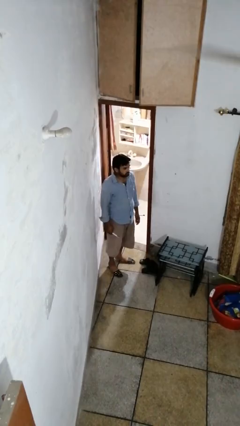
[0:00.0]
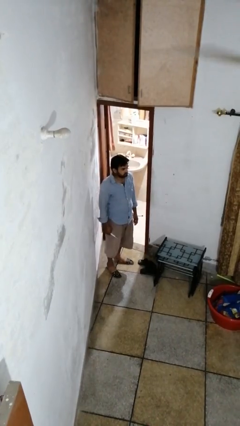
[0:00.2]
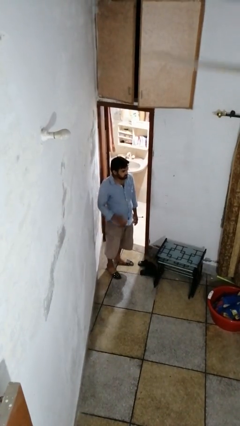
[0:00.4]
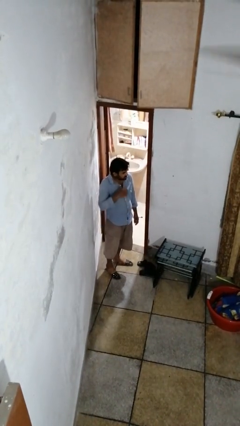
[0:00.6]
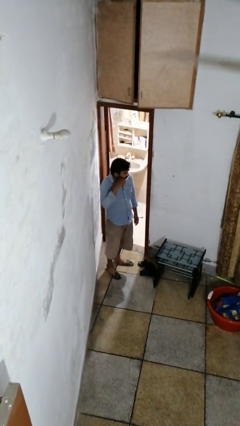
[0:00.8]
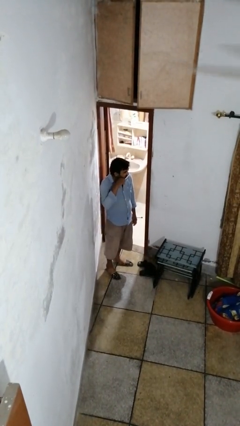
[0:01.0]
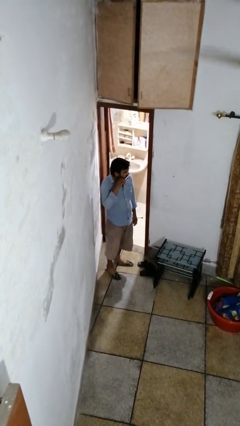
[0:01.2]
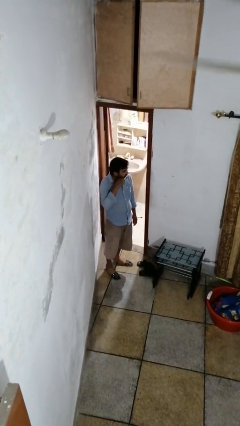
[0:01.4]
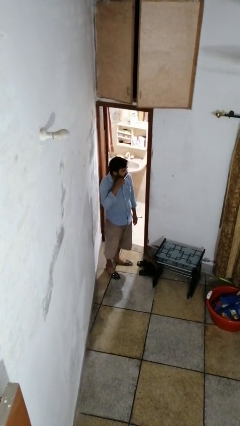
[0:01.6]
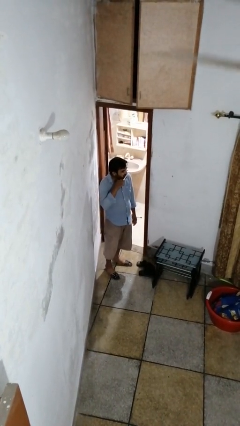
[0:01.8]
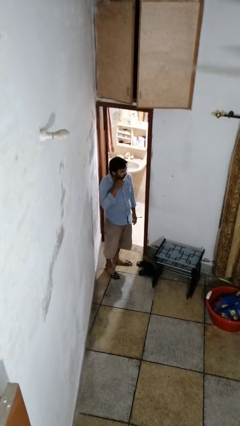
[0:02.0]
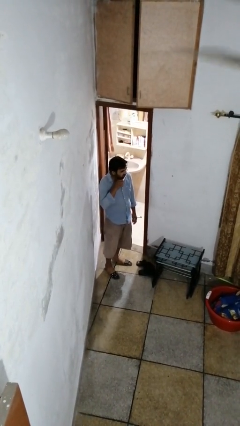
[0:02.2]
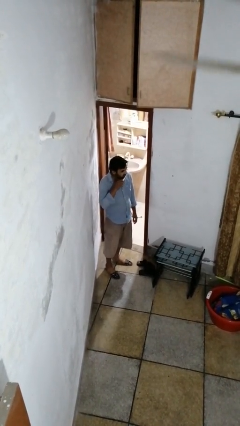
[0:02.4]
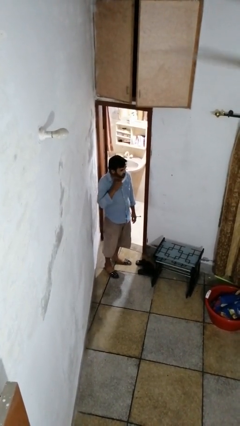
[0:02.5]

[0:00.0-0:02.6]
person brushes teeth

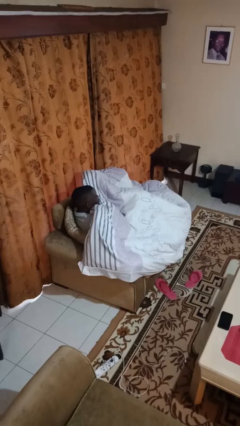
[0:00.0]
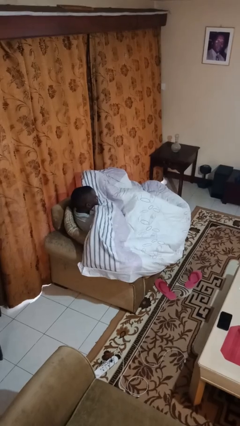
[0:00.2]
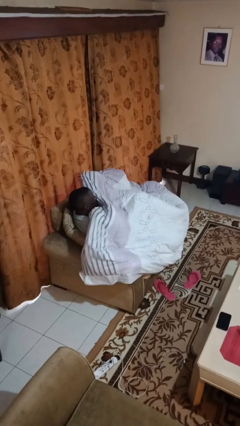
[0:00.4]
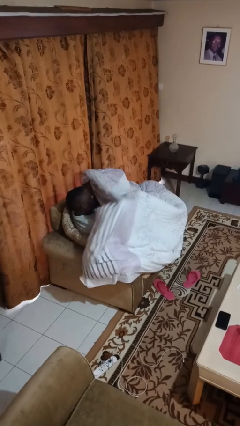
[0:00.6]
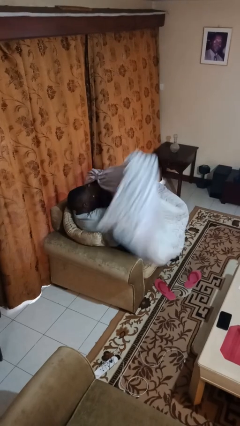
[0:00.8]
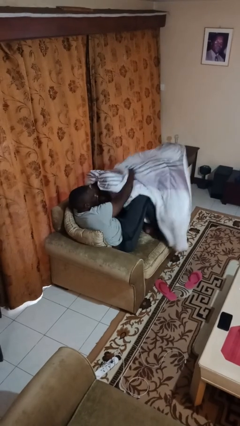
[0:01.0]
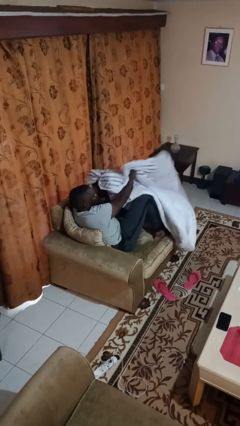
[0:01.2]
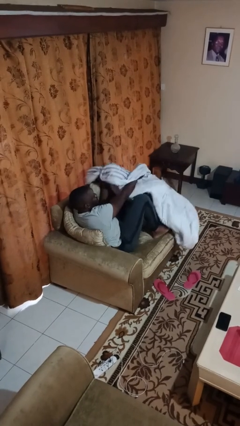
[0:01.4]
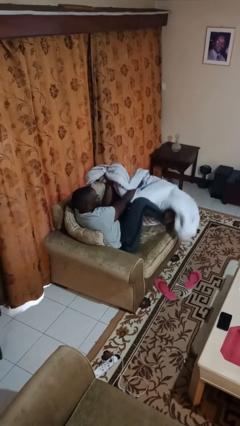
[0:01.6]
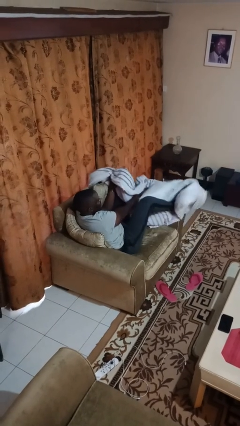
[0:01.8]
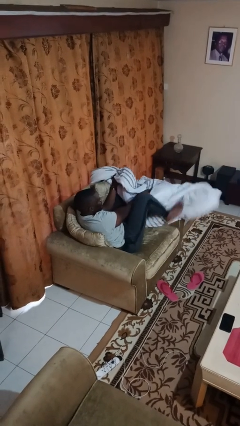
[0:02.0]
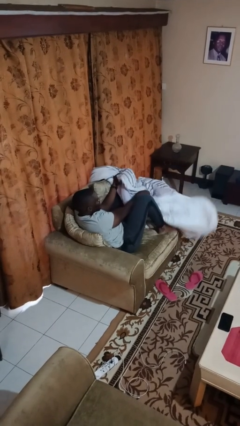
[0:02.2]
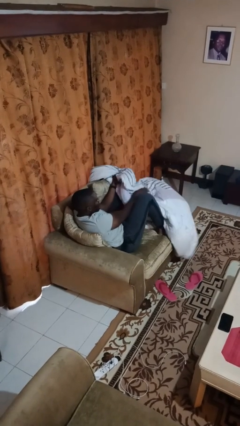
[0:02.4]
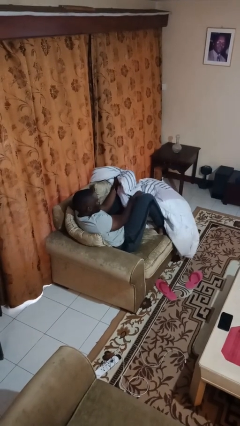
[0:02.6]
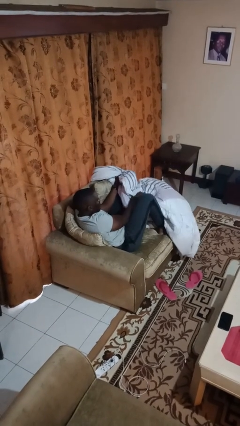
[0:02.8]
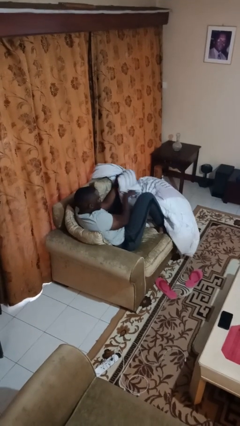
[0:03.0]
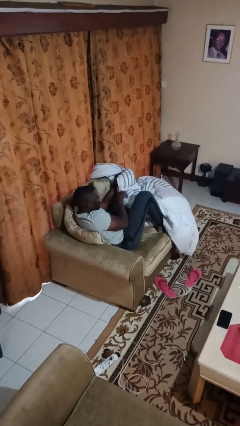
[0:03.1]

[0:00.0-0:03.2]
person uncovers with blanket

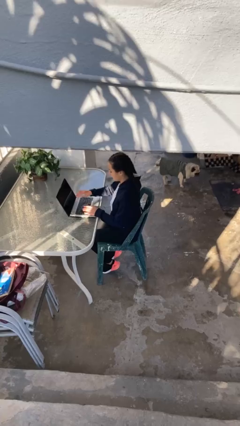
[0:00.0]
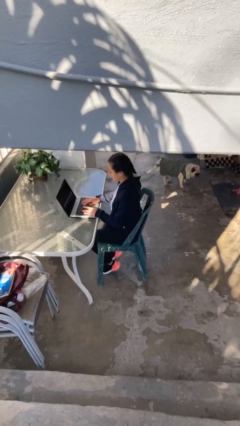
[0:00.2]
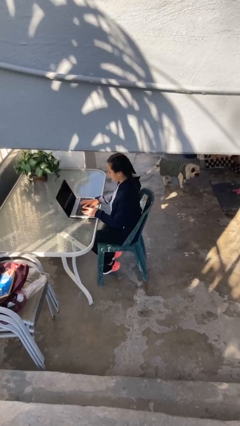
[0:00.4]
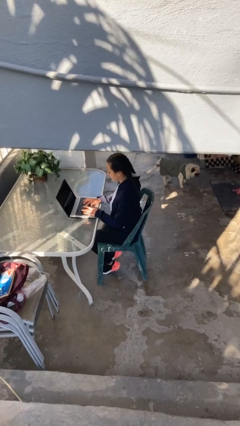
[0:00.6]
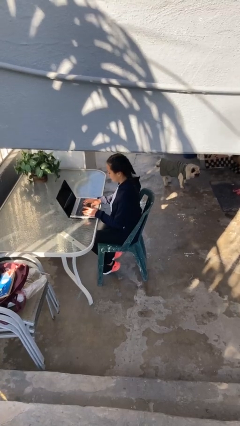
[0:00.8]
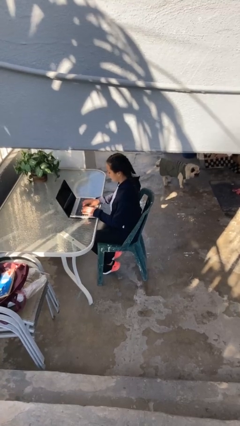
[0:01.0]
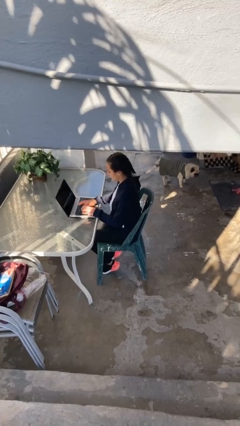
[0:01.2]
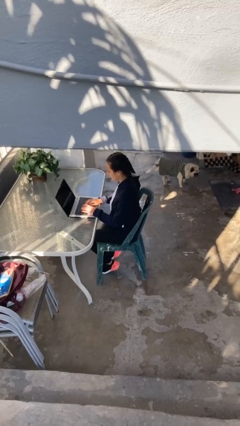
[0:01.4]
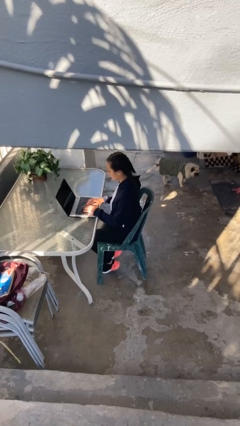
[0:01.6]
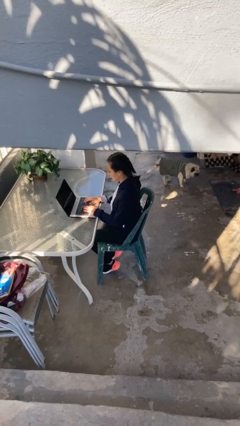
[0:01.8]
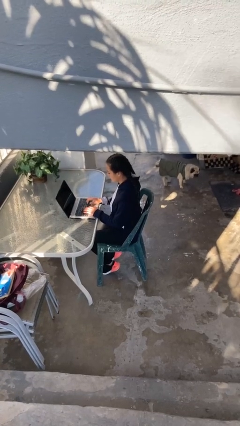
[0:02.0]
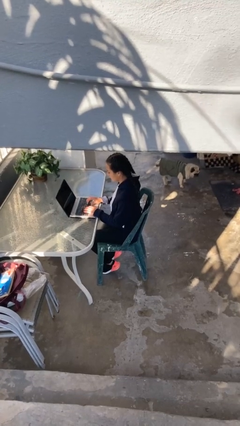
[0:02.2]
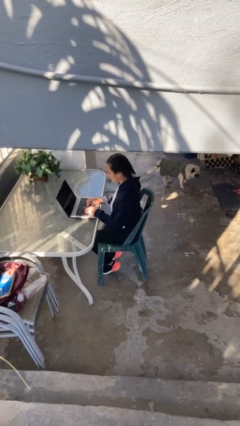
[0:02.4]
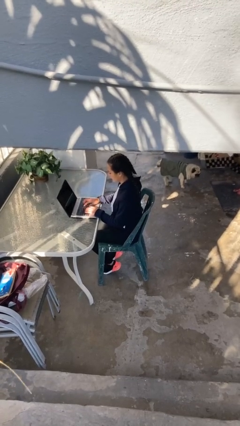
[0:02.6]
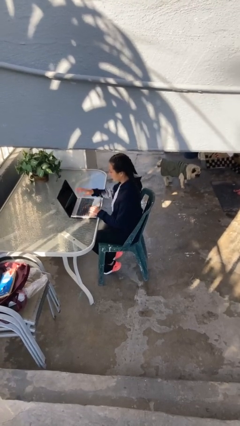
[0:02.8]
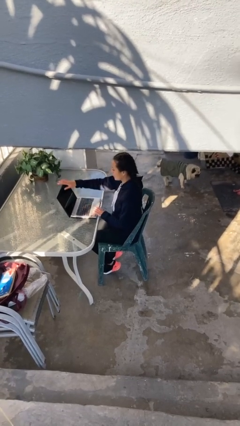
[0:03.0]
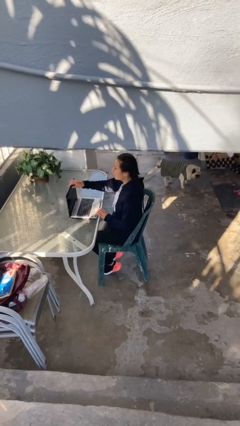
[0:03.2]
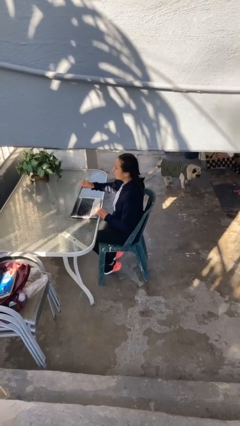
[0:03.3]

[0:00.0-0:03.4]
person interacts with laptop

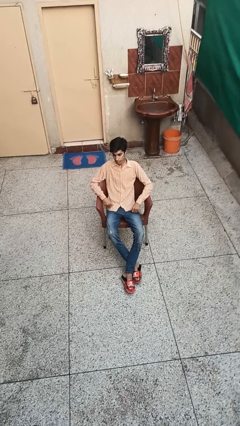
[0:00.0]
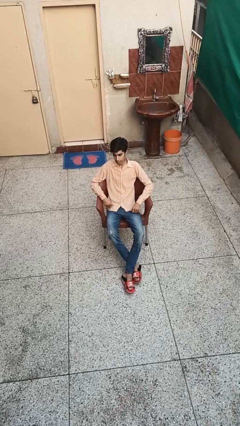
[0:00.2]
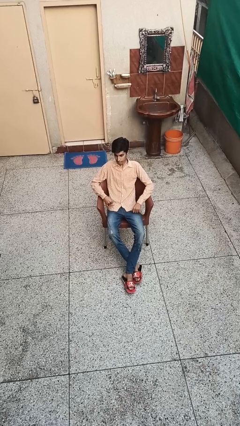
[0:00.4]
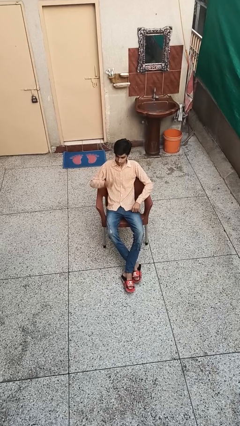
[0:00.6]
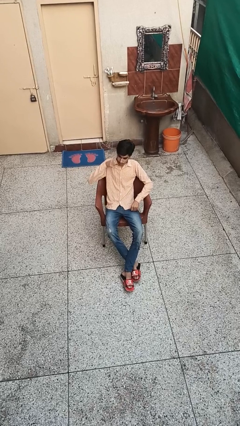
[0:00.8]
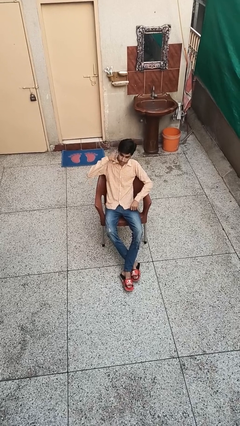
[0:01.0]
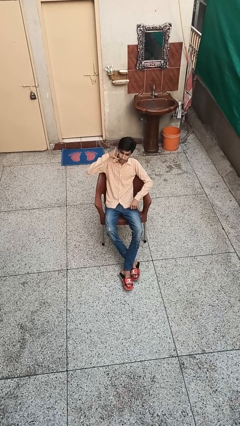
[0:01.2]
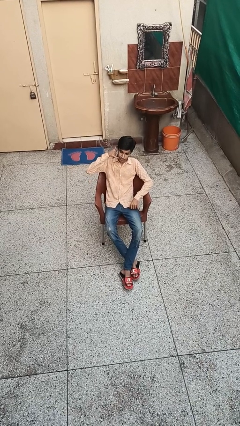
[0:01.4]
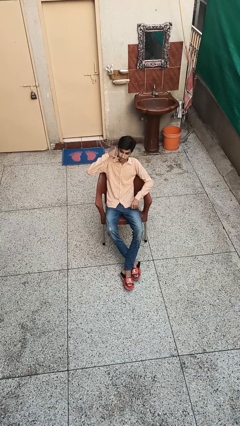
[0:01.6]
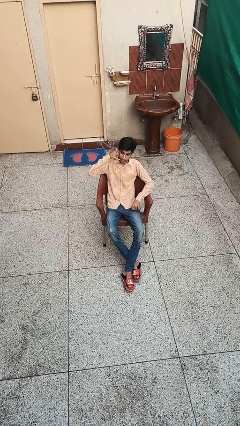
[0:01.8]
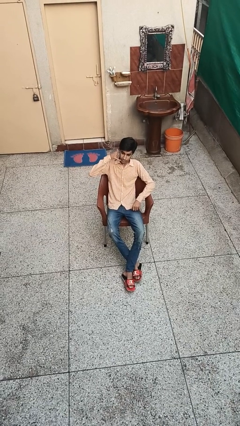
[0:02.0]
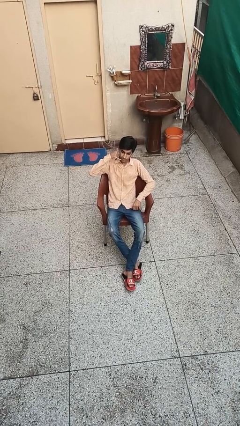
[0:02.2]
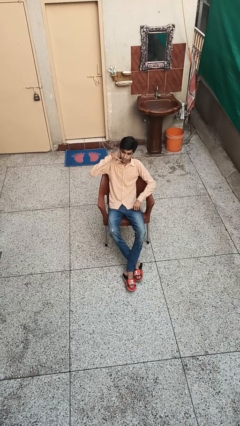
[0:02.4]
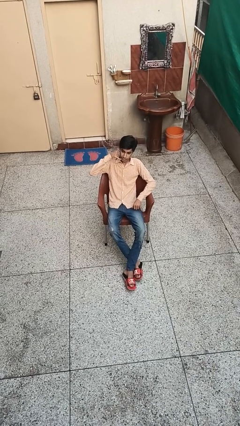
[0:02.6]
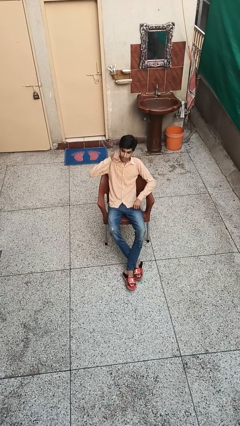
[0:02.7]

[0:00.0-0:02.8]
person gestures call me

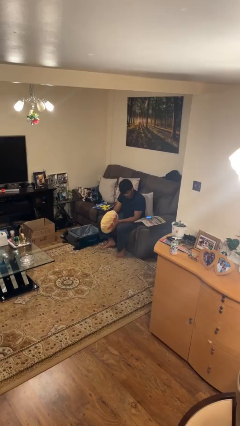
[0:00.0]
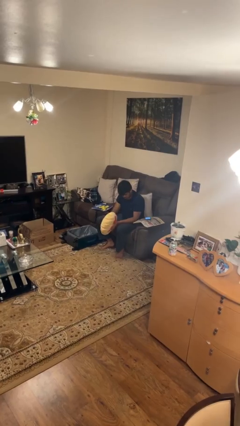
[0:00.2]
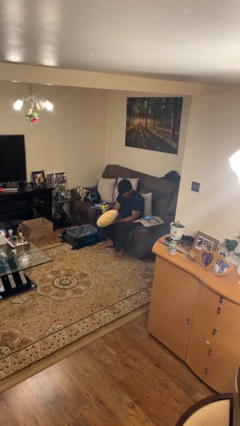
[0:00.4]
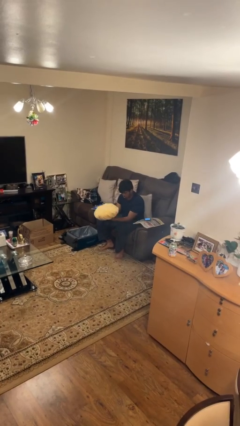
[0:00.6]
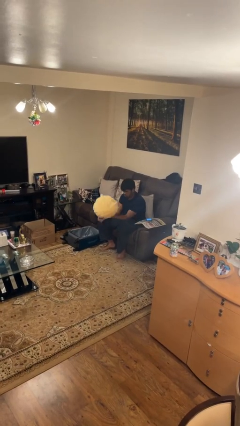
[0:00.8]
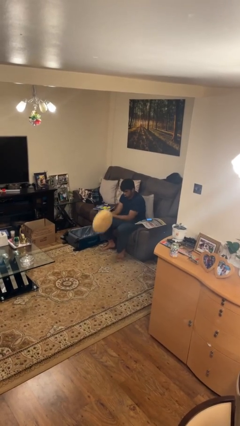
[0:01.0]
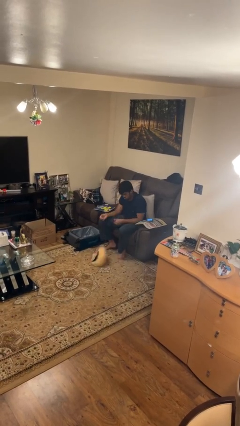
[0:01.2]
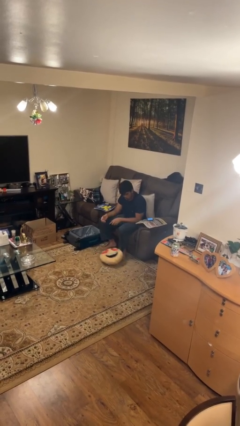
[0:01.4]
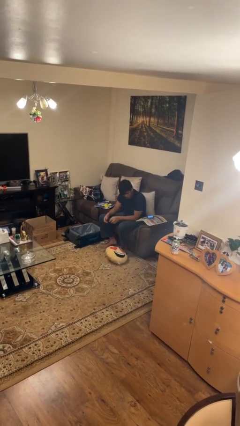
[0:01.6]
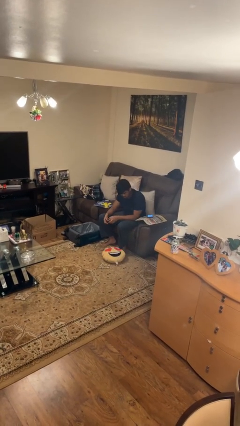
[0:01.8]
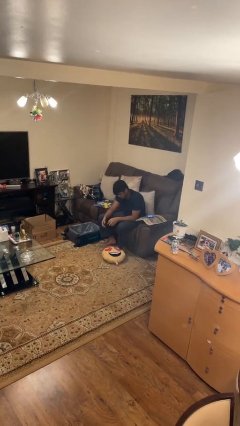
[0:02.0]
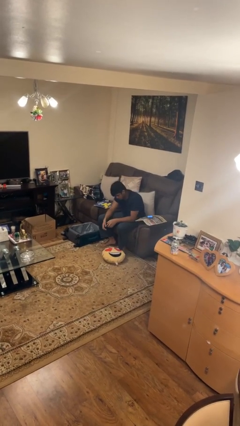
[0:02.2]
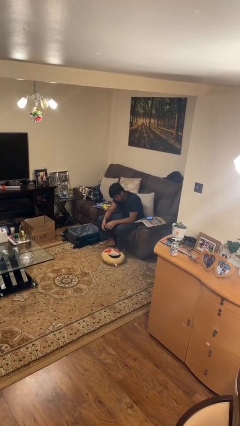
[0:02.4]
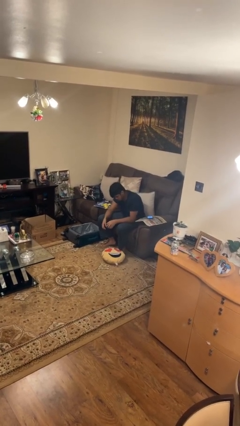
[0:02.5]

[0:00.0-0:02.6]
person drops object

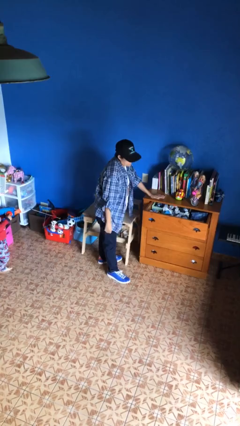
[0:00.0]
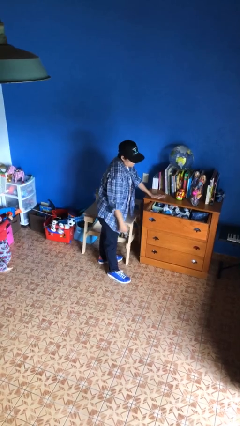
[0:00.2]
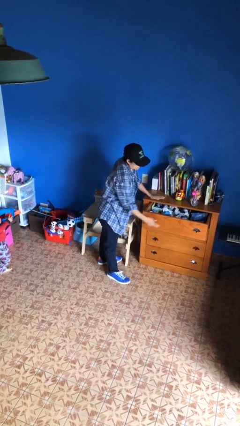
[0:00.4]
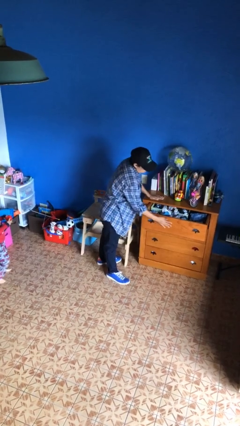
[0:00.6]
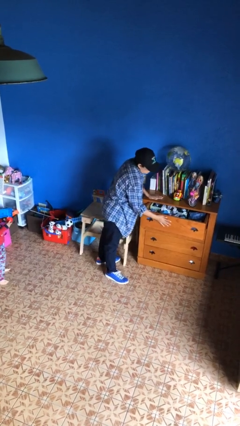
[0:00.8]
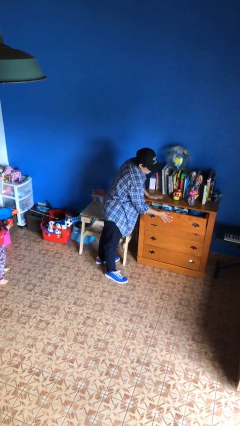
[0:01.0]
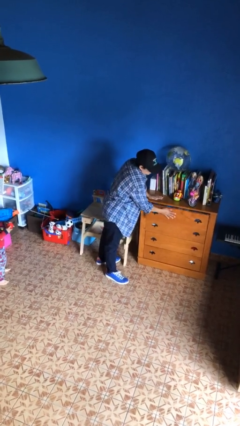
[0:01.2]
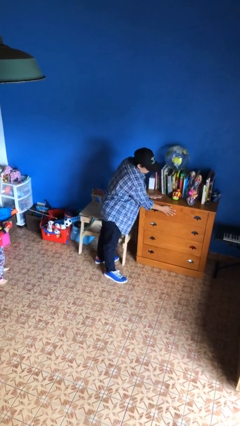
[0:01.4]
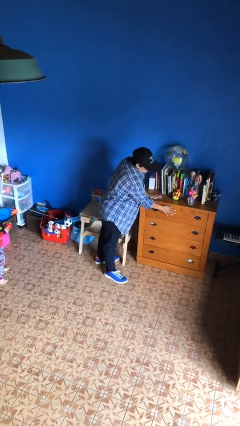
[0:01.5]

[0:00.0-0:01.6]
person closes dresser drawer

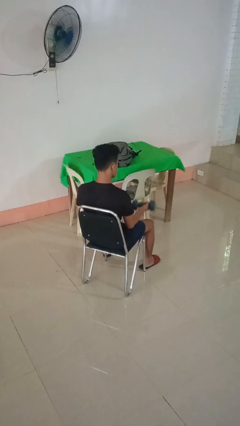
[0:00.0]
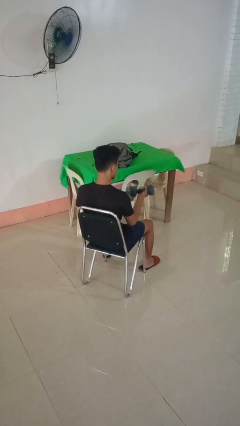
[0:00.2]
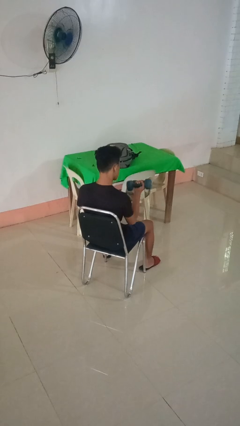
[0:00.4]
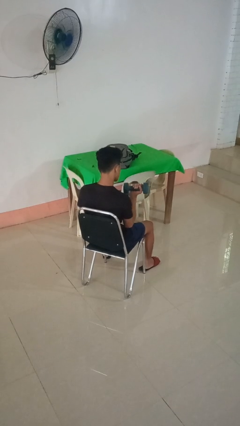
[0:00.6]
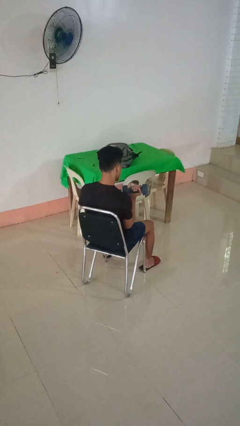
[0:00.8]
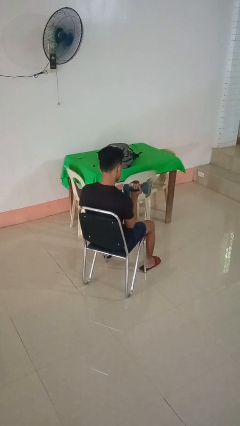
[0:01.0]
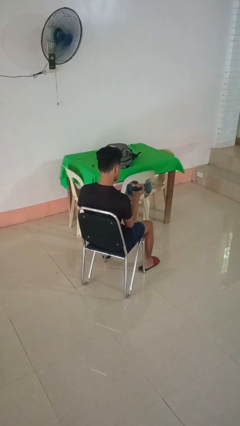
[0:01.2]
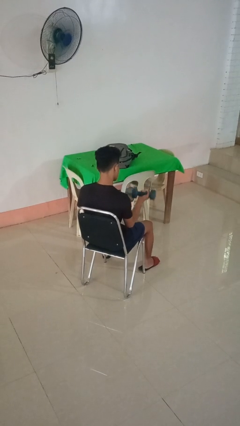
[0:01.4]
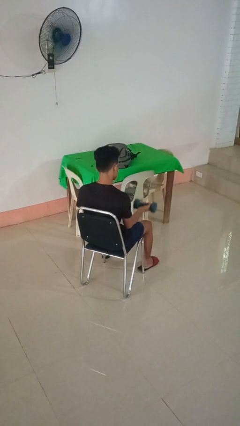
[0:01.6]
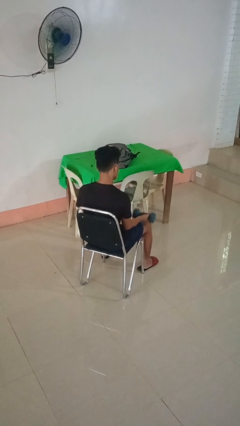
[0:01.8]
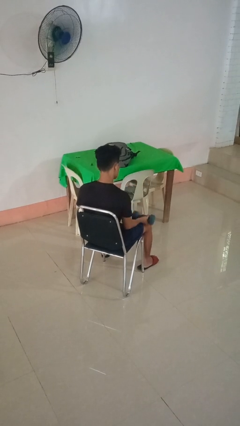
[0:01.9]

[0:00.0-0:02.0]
person lifts dumbbells
